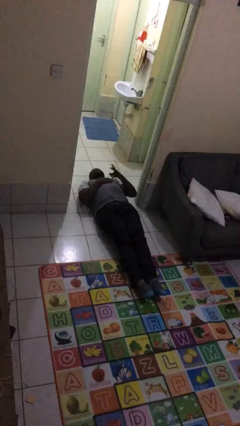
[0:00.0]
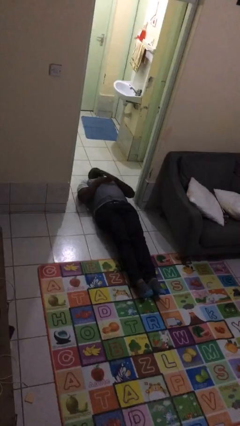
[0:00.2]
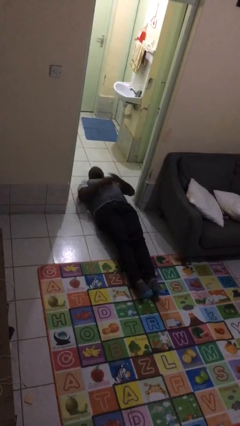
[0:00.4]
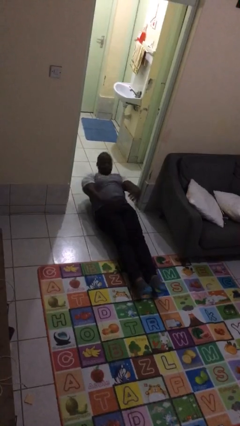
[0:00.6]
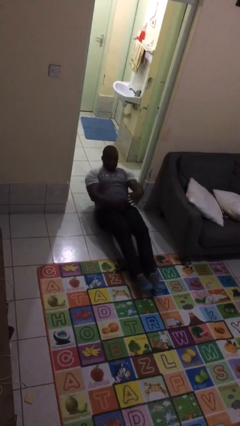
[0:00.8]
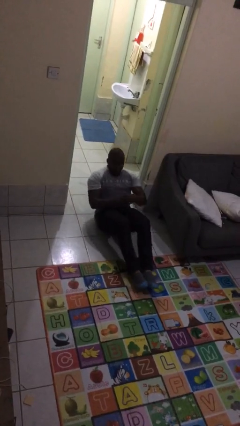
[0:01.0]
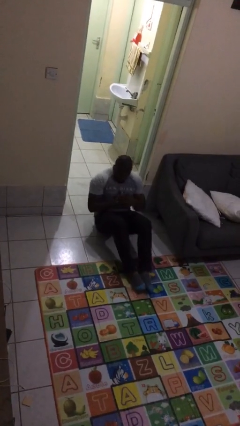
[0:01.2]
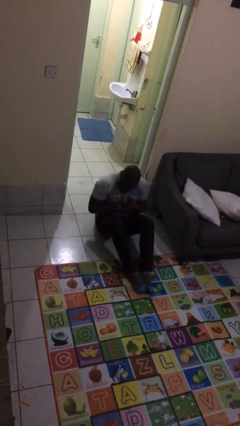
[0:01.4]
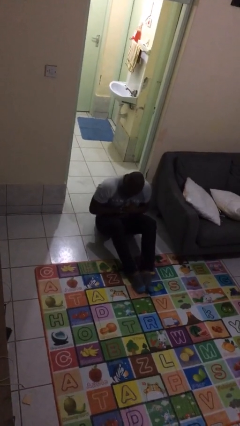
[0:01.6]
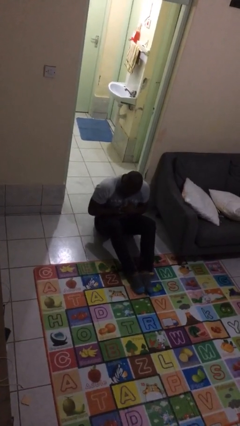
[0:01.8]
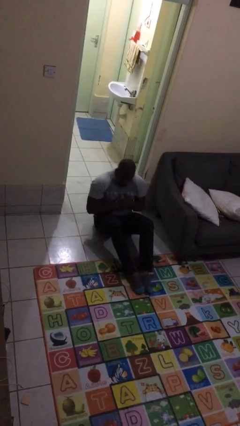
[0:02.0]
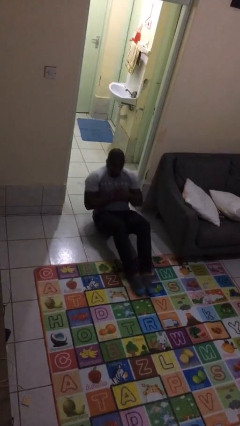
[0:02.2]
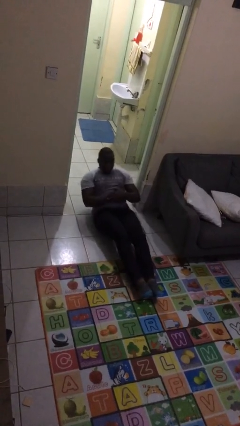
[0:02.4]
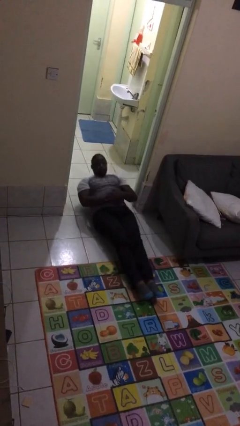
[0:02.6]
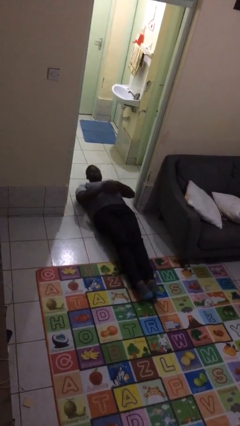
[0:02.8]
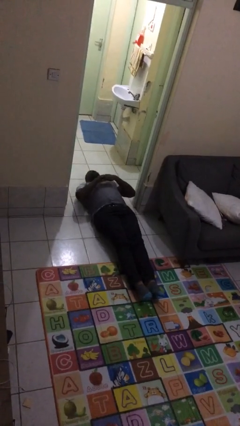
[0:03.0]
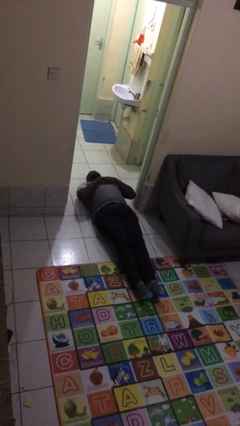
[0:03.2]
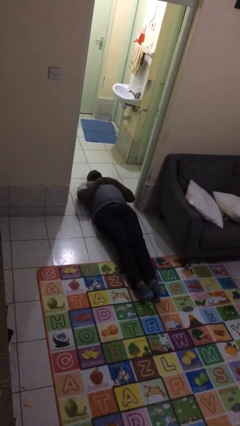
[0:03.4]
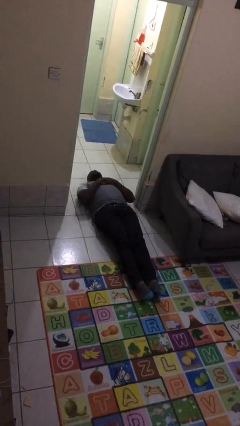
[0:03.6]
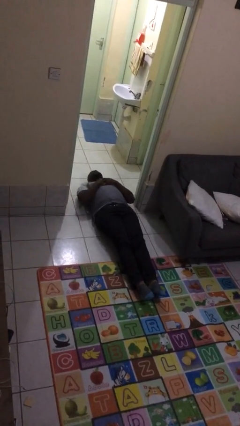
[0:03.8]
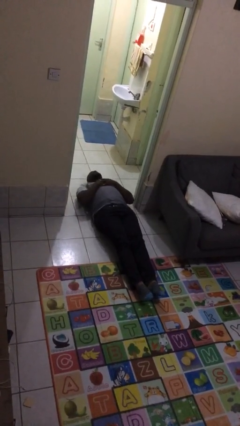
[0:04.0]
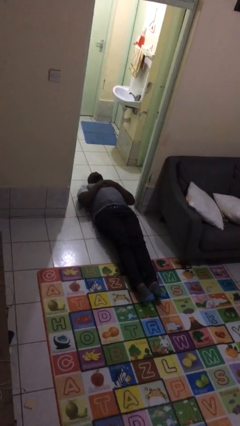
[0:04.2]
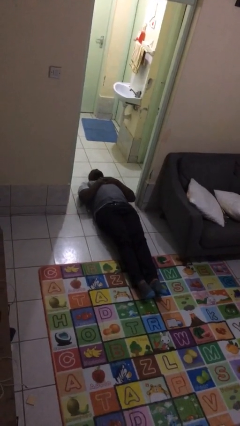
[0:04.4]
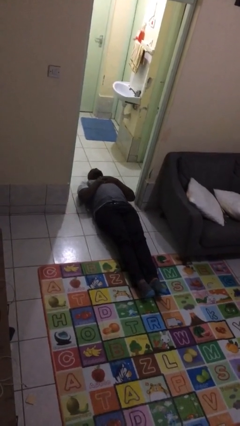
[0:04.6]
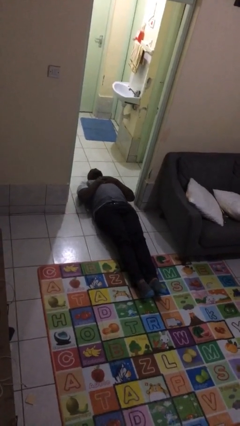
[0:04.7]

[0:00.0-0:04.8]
person exercises with situp

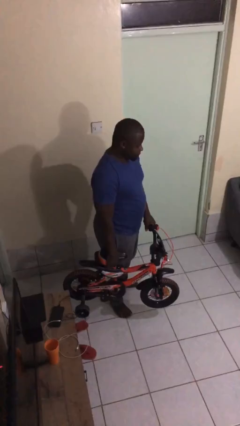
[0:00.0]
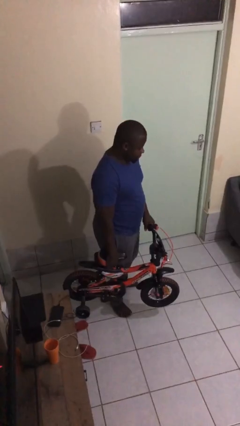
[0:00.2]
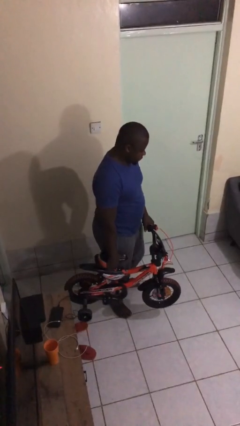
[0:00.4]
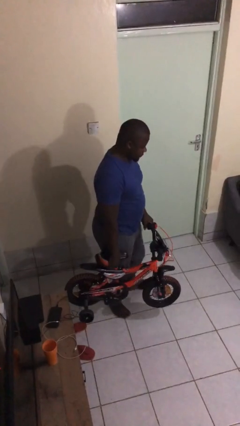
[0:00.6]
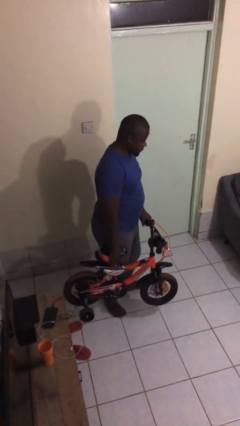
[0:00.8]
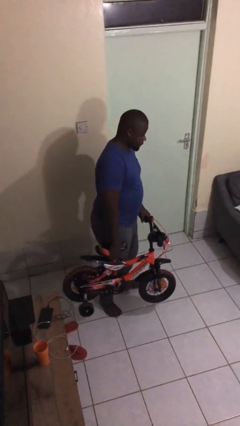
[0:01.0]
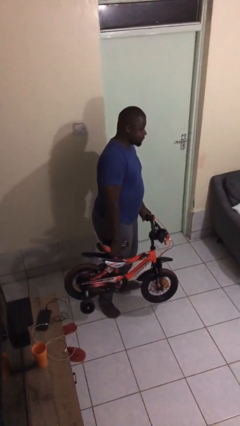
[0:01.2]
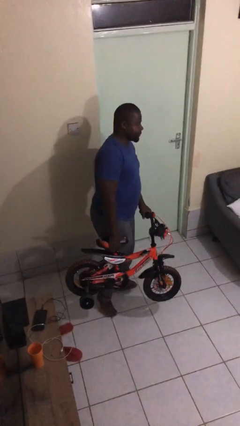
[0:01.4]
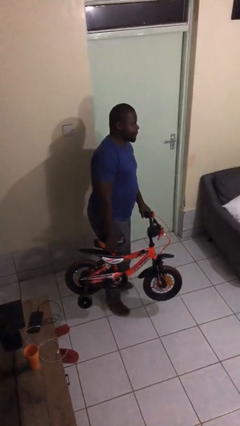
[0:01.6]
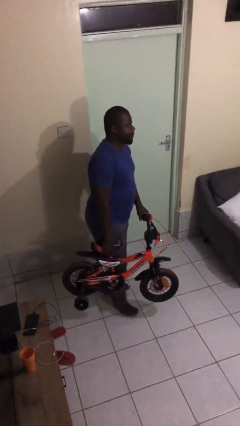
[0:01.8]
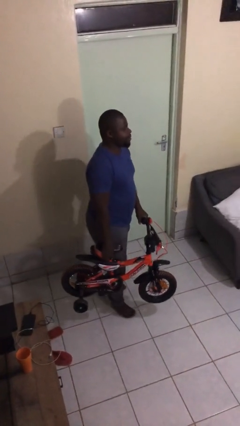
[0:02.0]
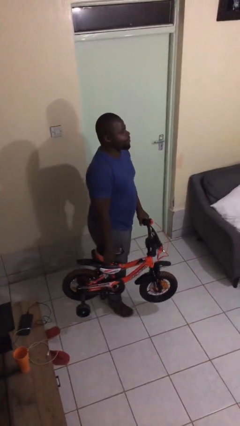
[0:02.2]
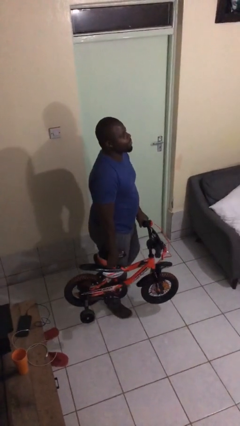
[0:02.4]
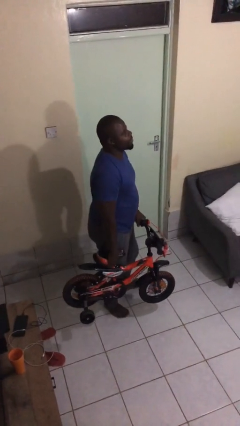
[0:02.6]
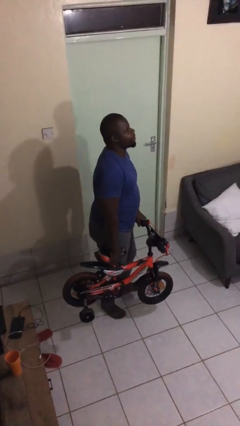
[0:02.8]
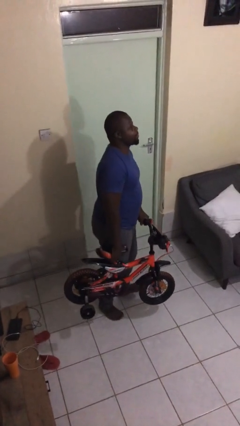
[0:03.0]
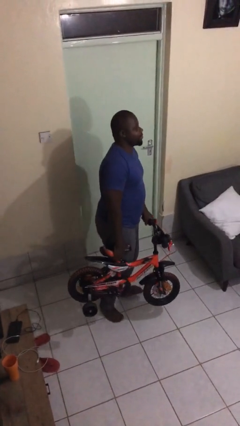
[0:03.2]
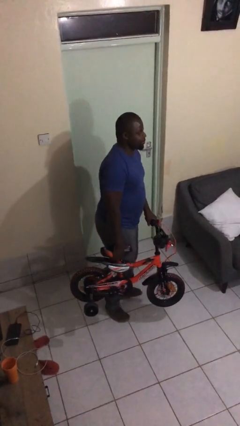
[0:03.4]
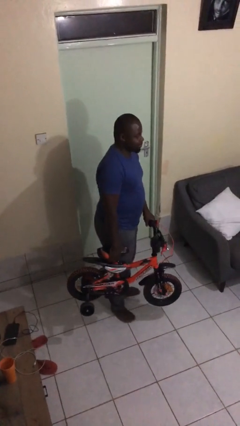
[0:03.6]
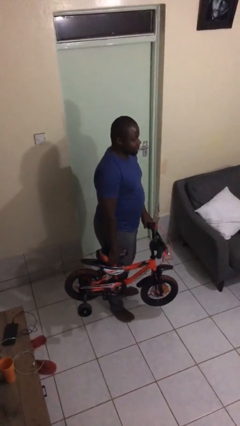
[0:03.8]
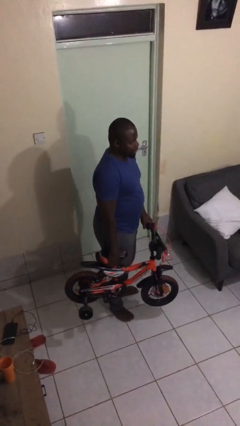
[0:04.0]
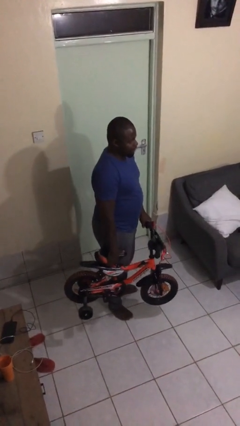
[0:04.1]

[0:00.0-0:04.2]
person carries bicycle

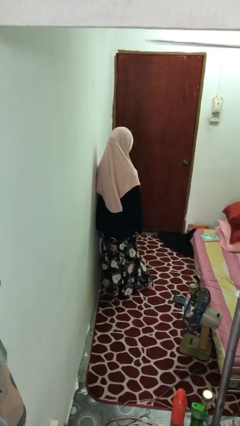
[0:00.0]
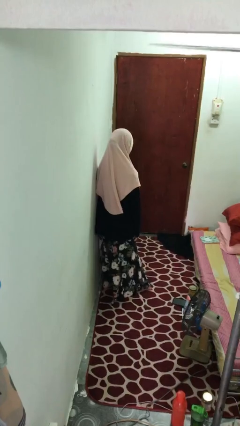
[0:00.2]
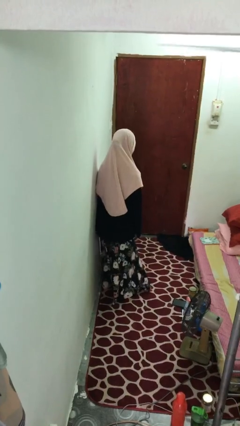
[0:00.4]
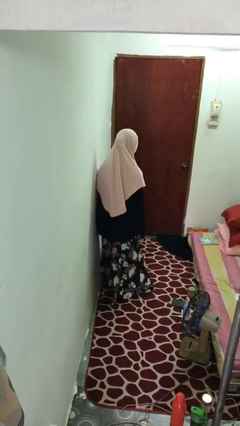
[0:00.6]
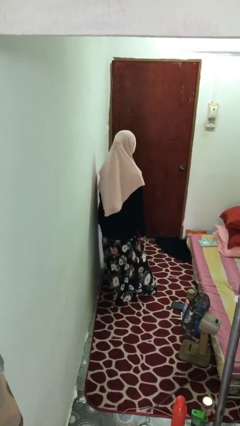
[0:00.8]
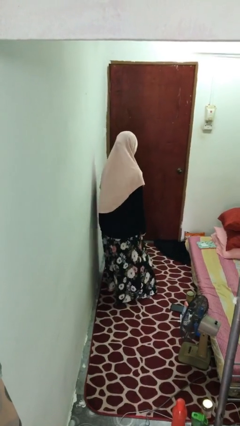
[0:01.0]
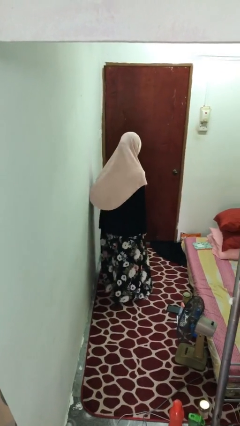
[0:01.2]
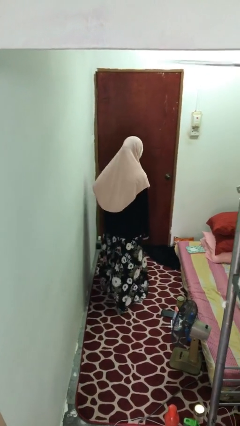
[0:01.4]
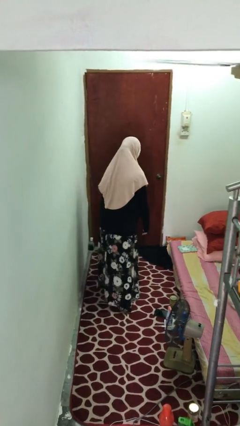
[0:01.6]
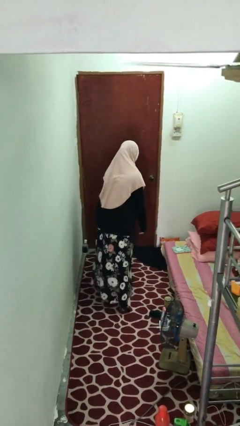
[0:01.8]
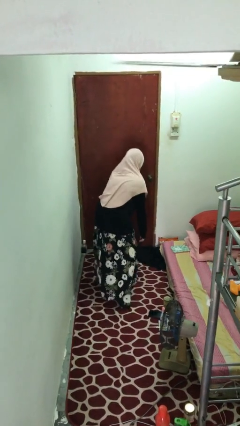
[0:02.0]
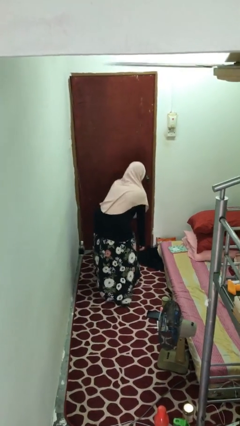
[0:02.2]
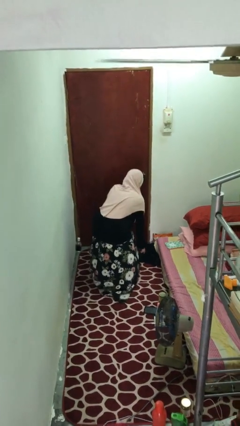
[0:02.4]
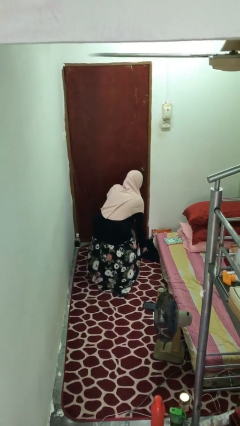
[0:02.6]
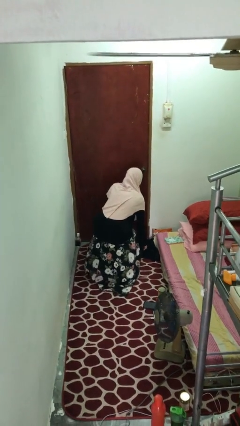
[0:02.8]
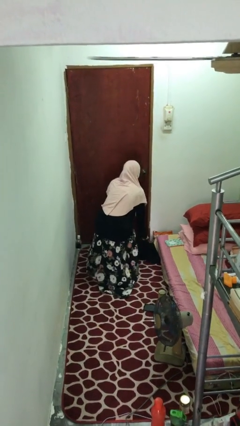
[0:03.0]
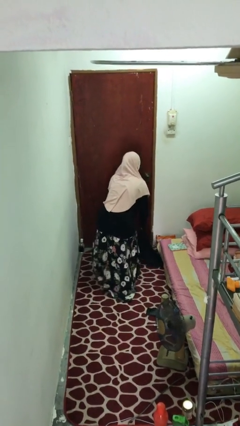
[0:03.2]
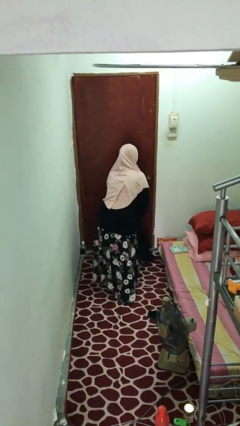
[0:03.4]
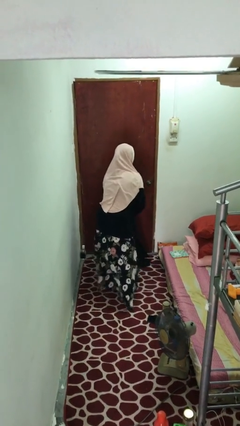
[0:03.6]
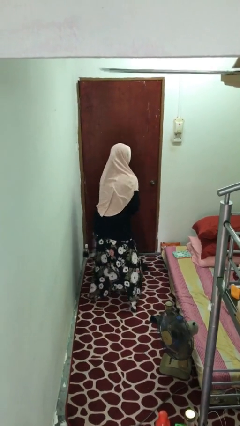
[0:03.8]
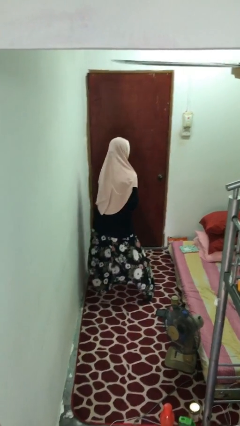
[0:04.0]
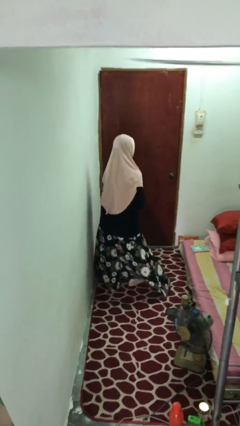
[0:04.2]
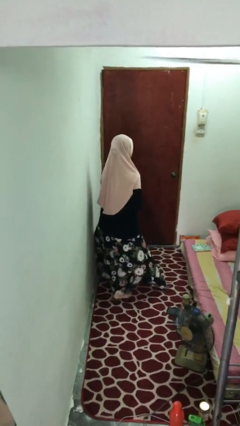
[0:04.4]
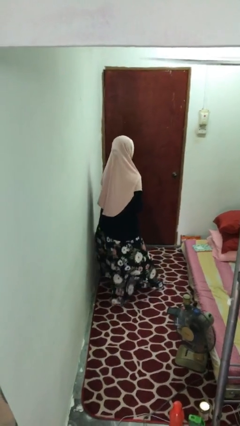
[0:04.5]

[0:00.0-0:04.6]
person picks up object from floor

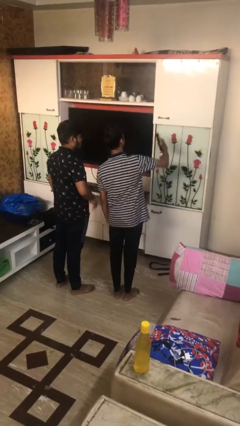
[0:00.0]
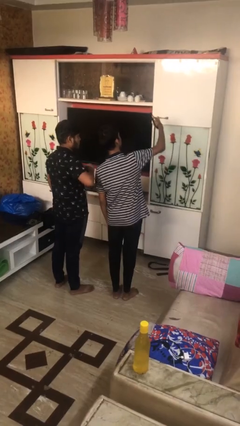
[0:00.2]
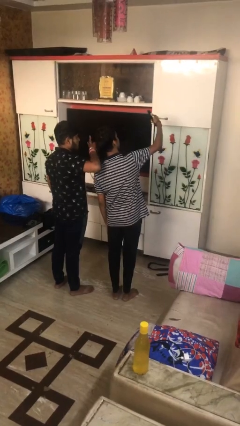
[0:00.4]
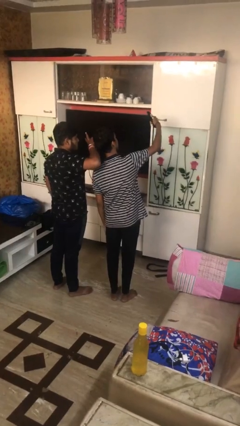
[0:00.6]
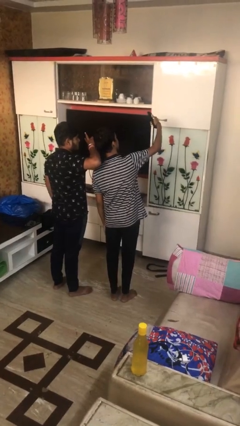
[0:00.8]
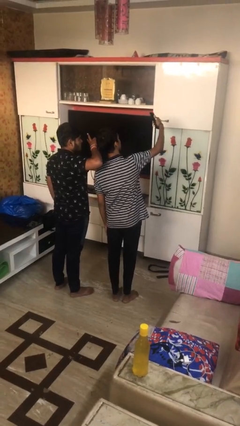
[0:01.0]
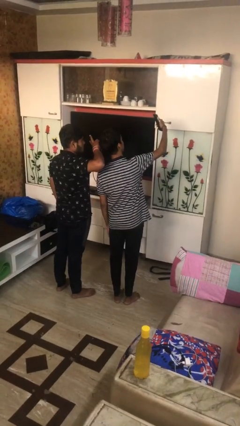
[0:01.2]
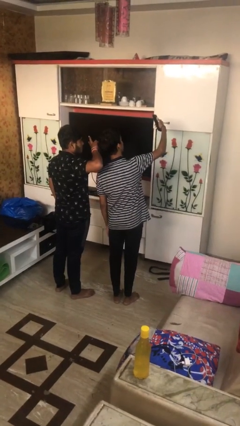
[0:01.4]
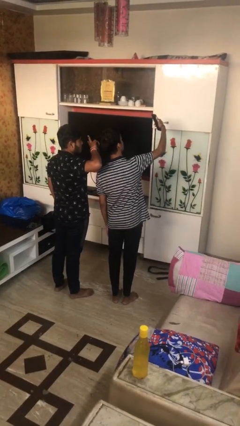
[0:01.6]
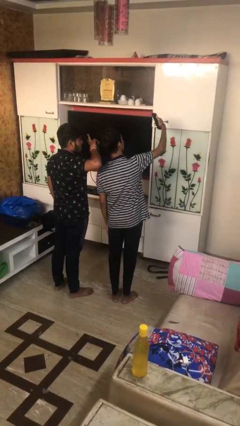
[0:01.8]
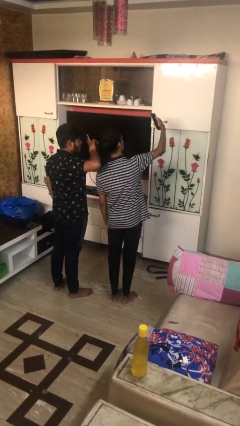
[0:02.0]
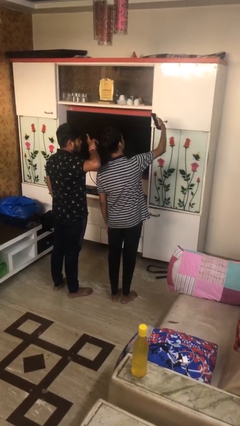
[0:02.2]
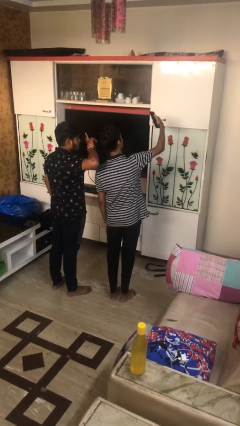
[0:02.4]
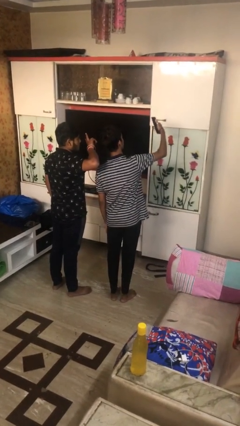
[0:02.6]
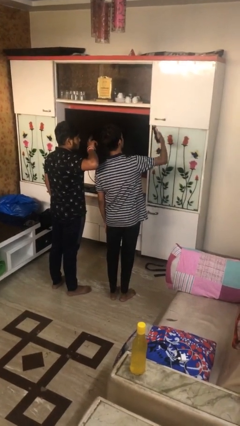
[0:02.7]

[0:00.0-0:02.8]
person takes selfie with person

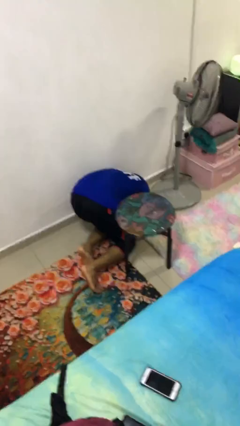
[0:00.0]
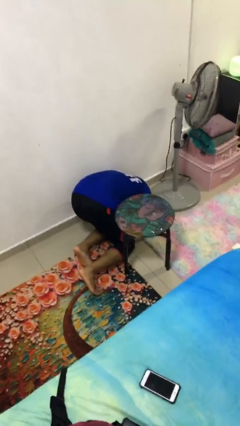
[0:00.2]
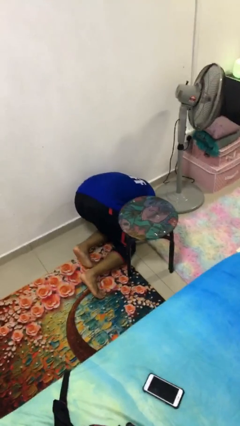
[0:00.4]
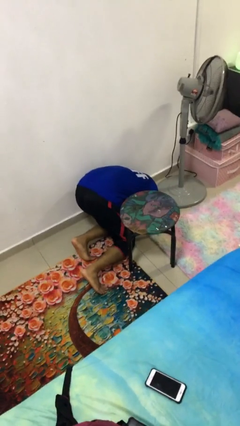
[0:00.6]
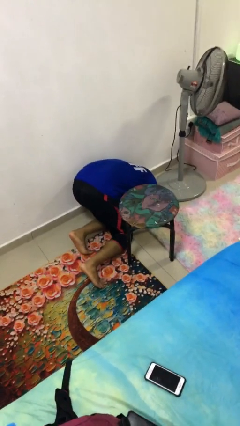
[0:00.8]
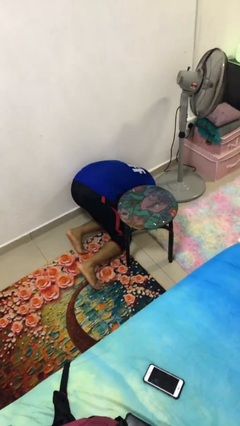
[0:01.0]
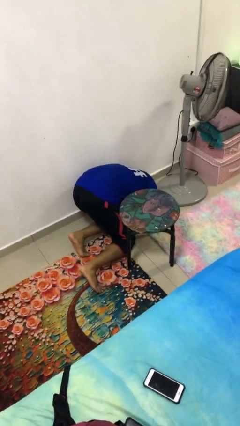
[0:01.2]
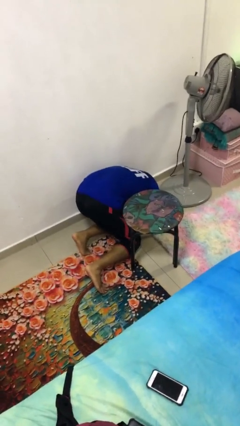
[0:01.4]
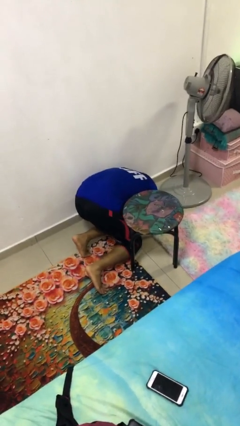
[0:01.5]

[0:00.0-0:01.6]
person lies down on floor
